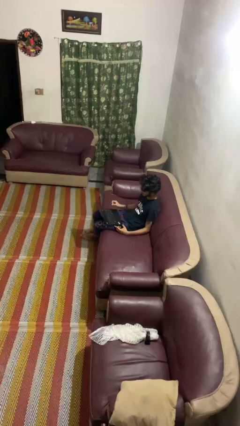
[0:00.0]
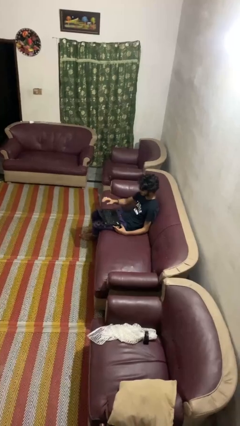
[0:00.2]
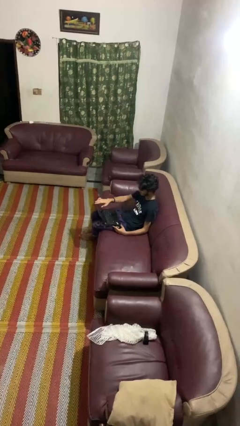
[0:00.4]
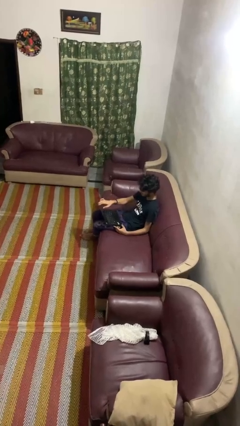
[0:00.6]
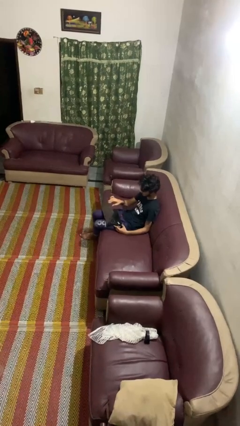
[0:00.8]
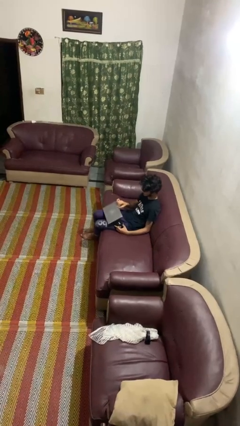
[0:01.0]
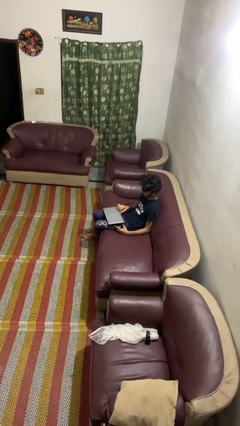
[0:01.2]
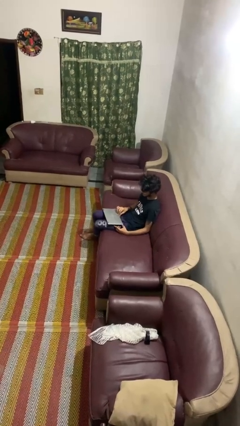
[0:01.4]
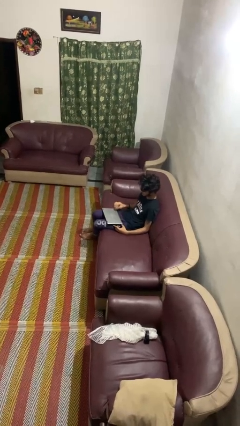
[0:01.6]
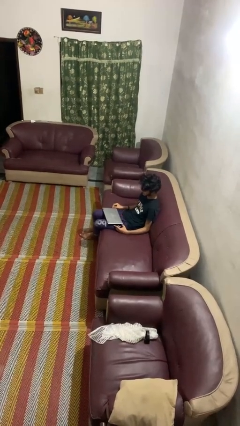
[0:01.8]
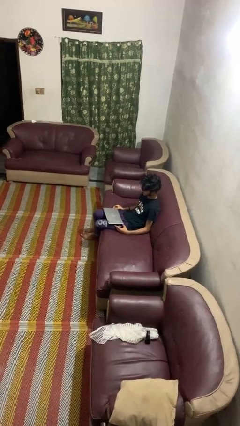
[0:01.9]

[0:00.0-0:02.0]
person closes laptop

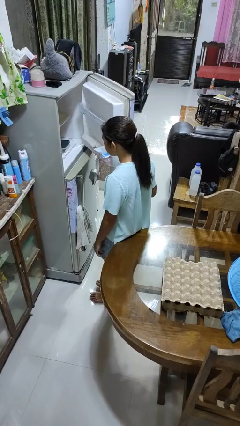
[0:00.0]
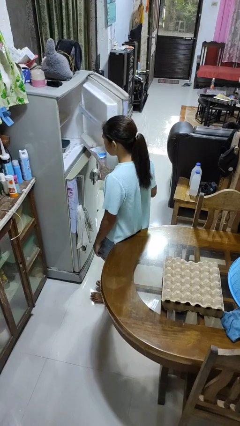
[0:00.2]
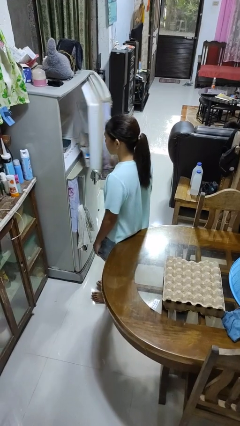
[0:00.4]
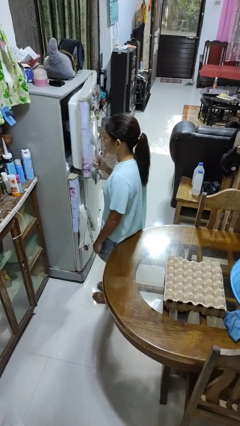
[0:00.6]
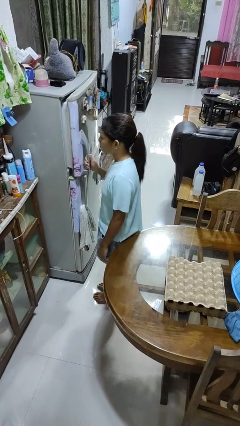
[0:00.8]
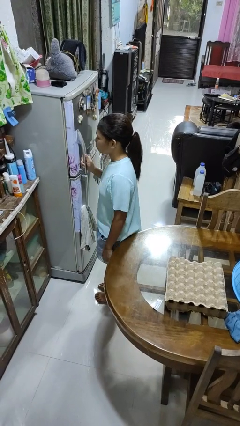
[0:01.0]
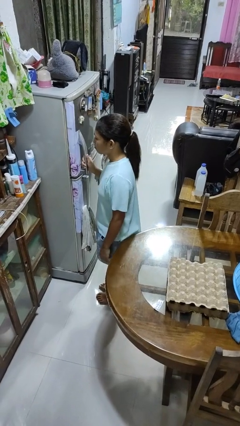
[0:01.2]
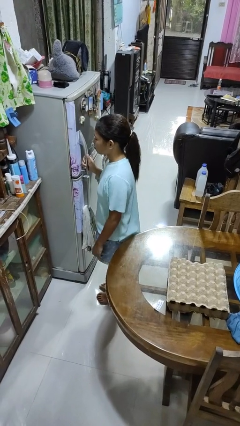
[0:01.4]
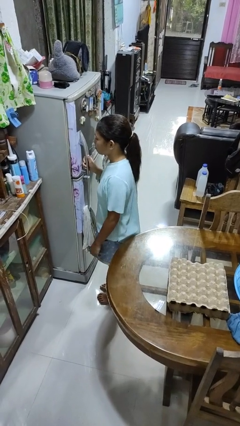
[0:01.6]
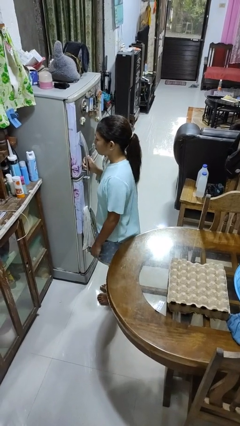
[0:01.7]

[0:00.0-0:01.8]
person closes refrigerator

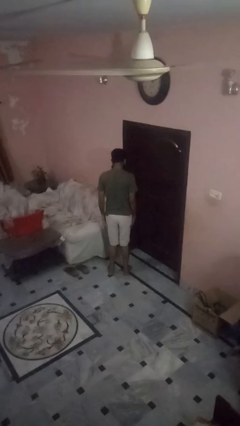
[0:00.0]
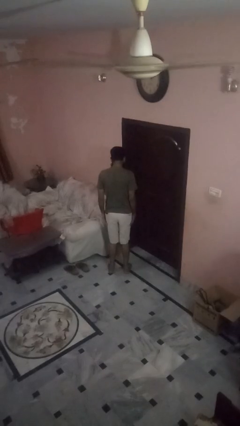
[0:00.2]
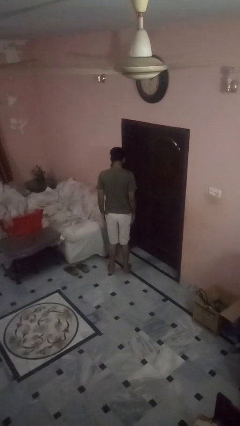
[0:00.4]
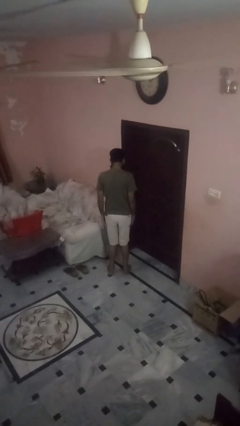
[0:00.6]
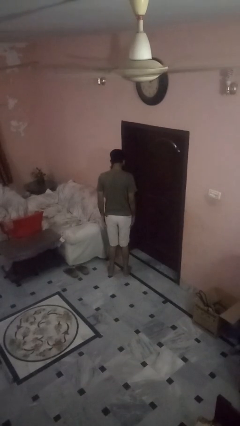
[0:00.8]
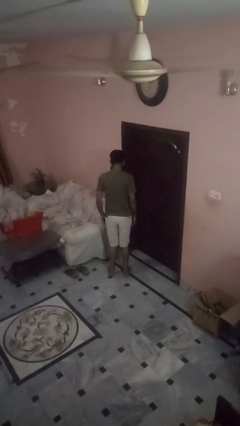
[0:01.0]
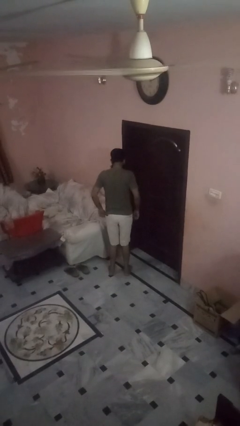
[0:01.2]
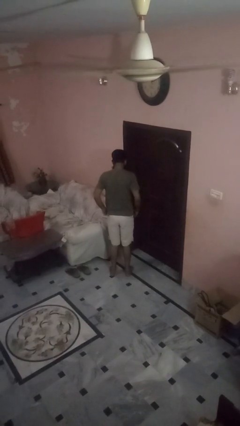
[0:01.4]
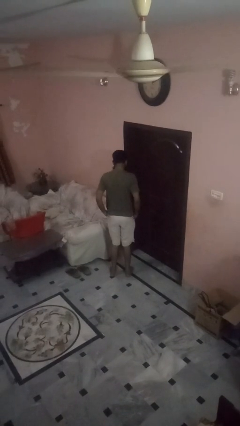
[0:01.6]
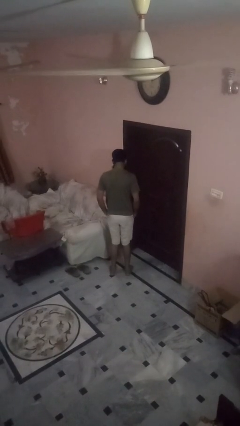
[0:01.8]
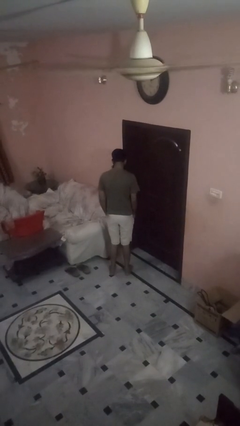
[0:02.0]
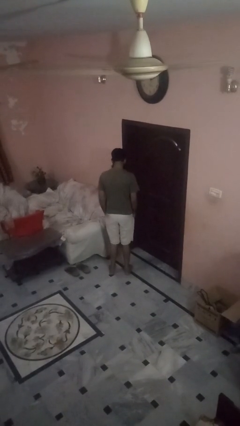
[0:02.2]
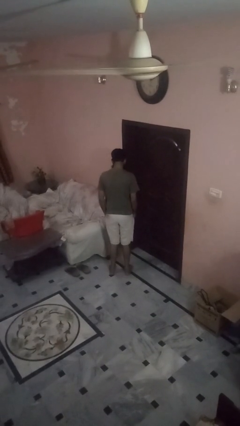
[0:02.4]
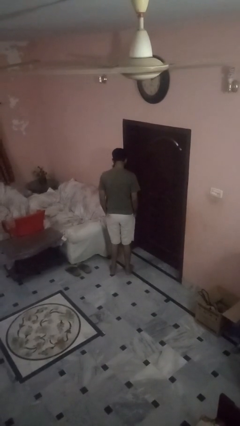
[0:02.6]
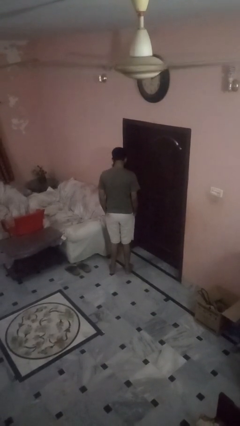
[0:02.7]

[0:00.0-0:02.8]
person puts hands in back pockets

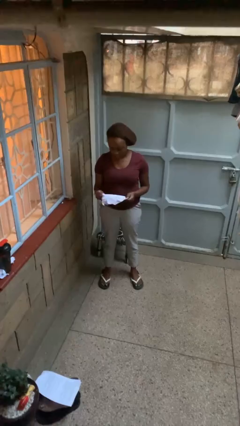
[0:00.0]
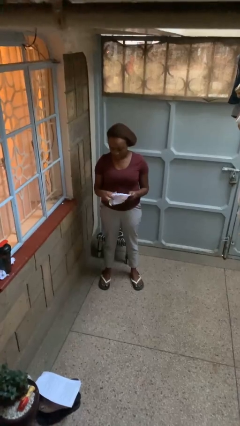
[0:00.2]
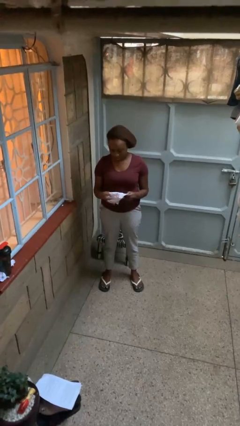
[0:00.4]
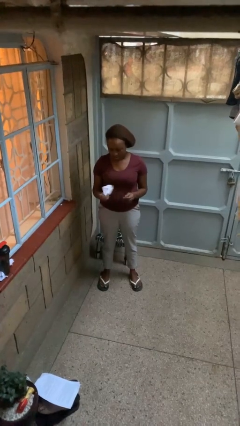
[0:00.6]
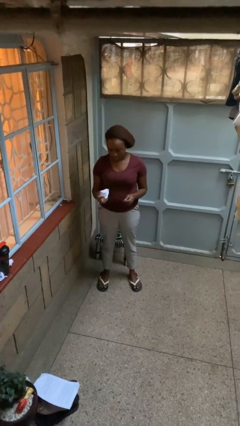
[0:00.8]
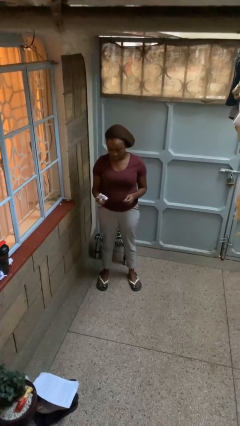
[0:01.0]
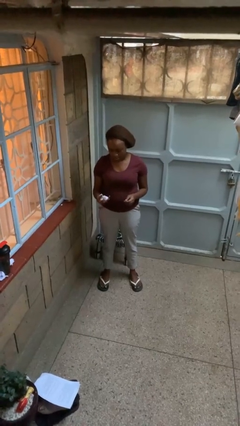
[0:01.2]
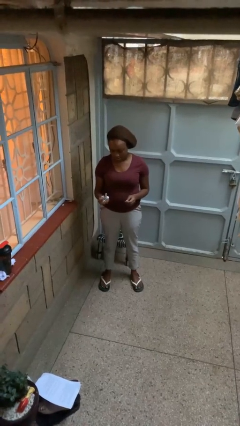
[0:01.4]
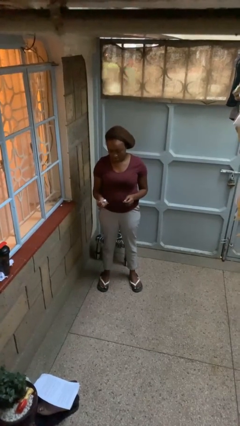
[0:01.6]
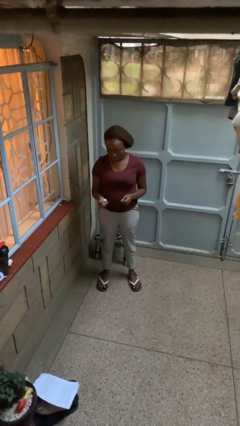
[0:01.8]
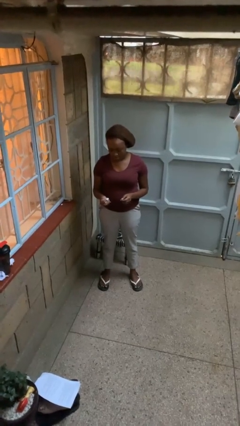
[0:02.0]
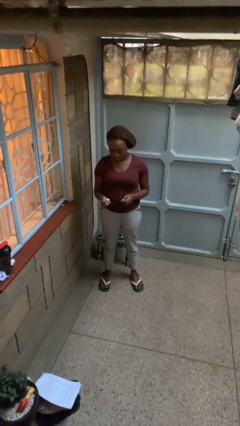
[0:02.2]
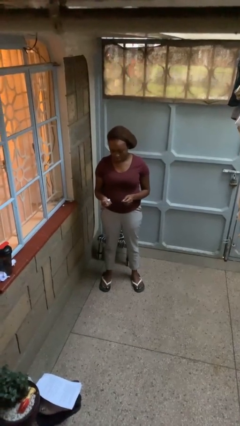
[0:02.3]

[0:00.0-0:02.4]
person crumples paper

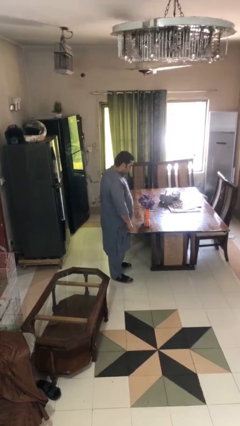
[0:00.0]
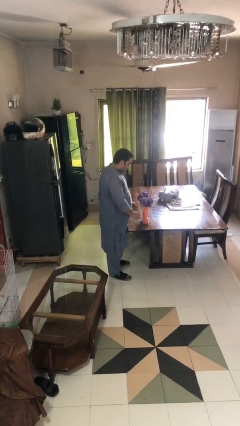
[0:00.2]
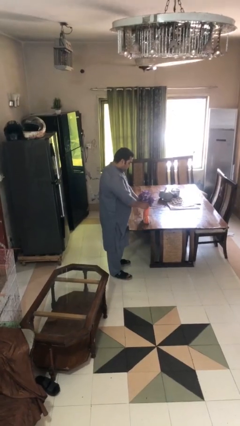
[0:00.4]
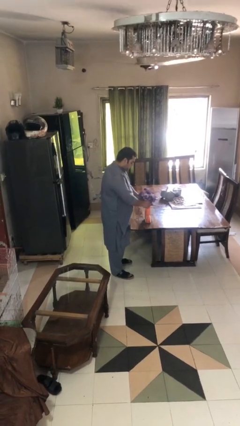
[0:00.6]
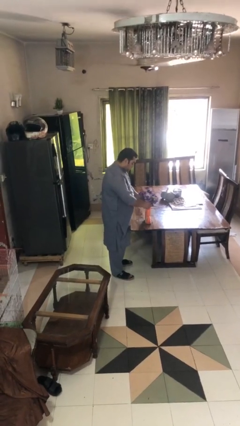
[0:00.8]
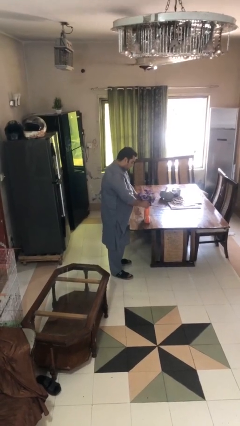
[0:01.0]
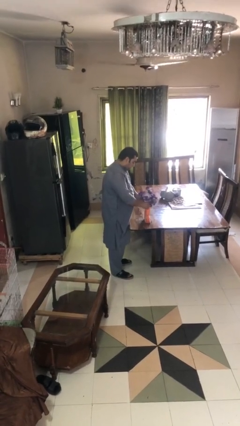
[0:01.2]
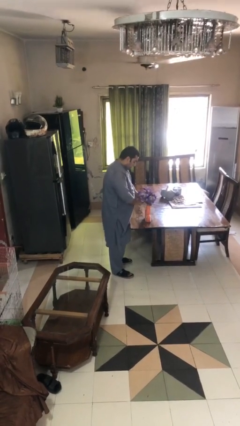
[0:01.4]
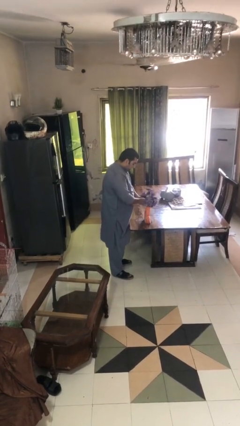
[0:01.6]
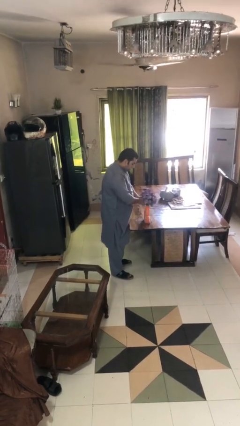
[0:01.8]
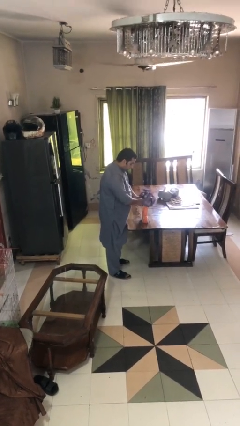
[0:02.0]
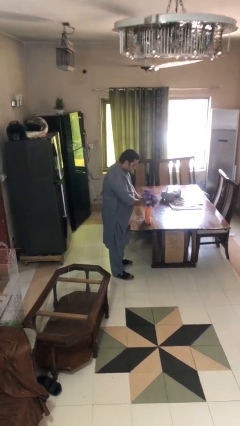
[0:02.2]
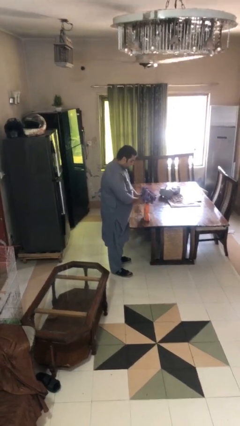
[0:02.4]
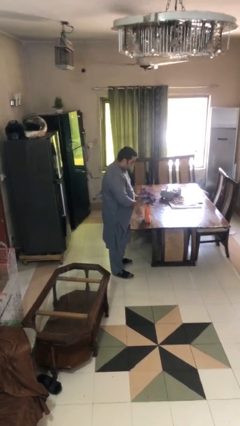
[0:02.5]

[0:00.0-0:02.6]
person arranges flowers in vase

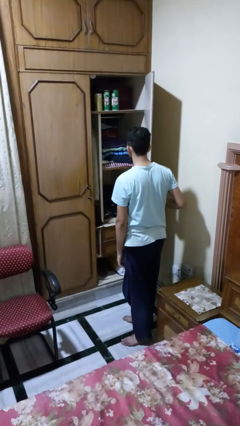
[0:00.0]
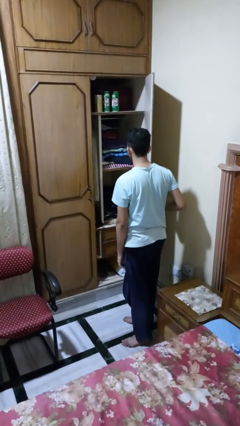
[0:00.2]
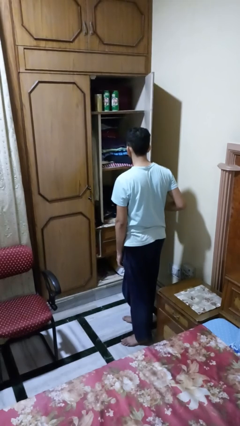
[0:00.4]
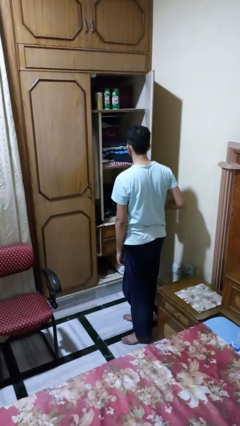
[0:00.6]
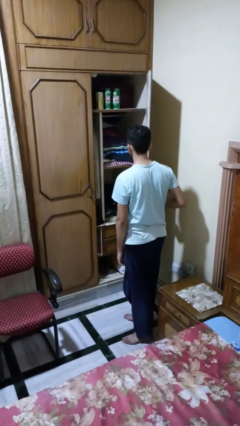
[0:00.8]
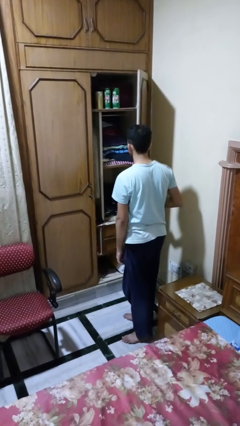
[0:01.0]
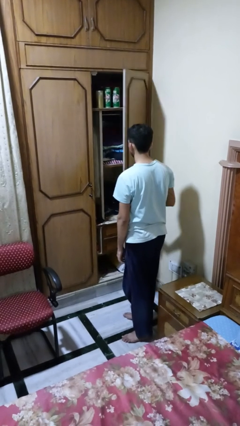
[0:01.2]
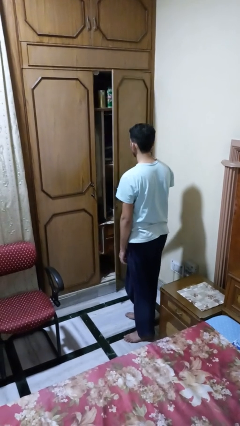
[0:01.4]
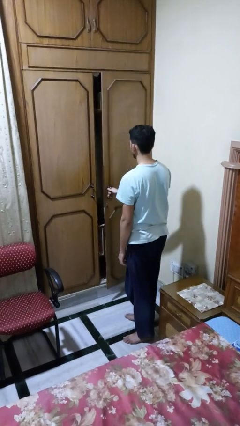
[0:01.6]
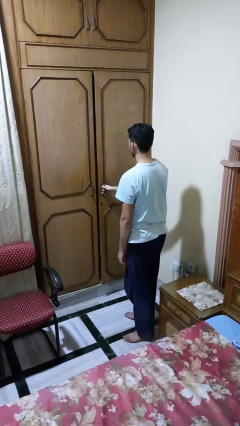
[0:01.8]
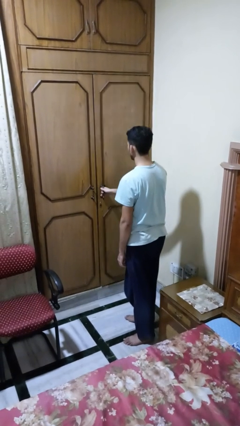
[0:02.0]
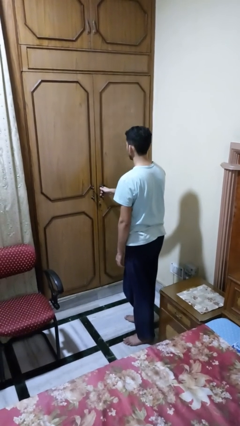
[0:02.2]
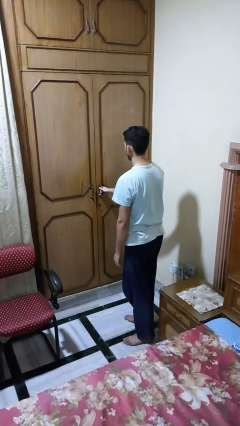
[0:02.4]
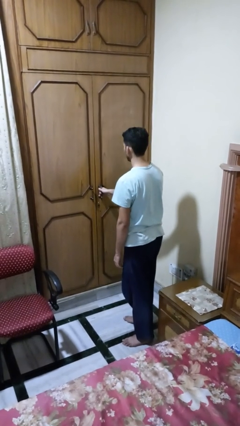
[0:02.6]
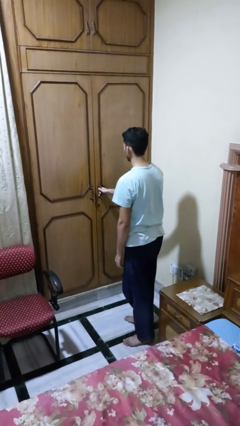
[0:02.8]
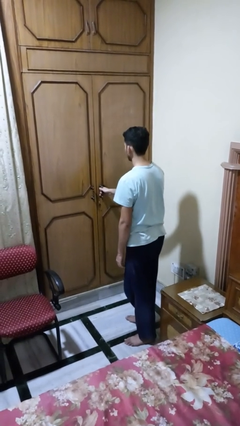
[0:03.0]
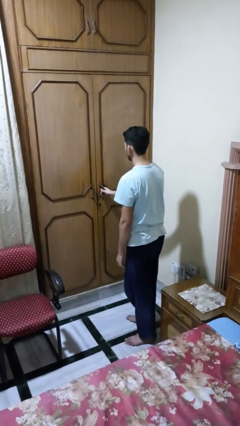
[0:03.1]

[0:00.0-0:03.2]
person closes closet door

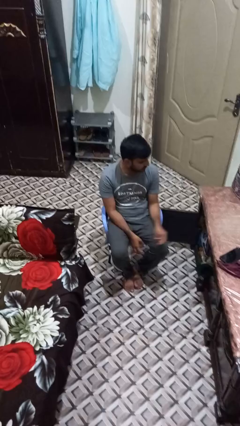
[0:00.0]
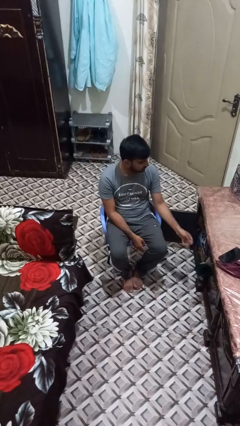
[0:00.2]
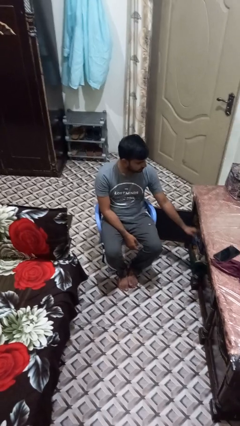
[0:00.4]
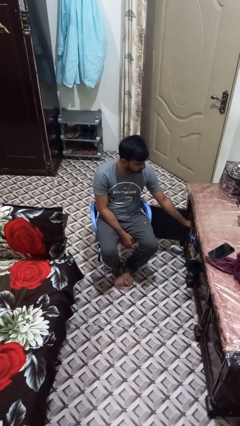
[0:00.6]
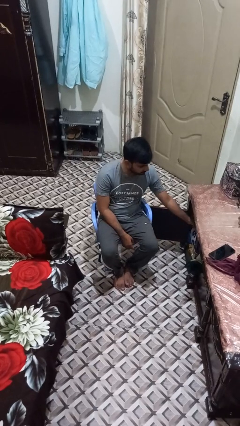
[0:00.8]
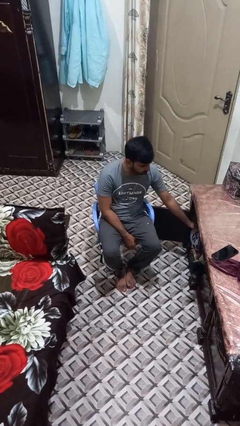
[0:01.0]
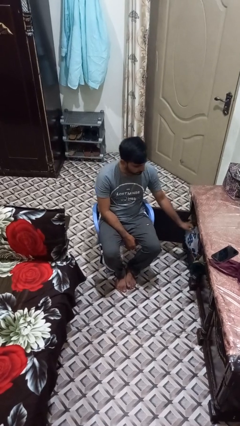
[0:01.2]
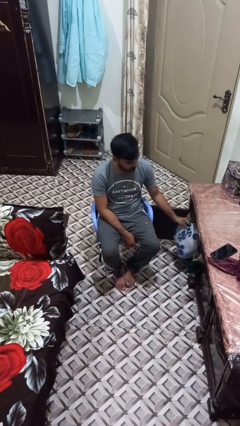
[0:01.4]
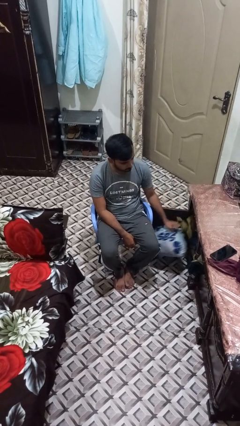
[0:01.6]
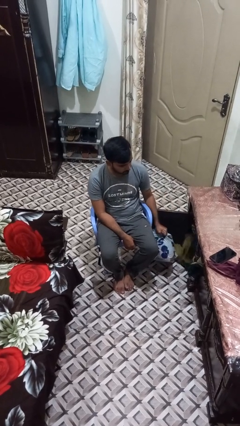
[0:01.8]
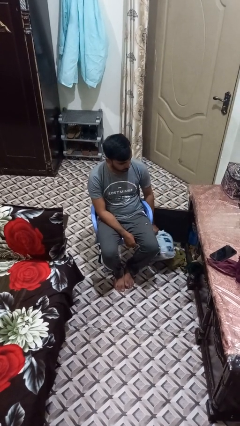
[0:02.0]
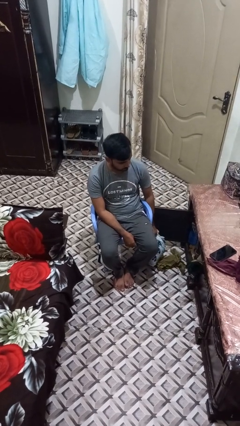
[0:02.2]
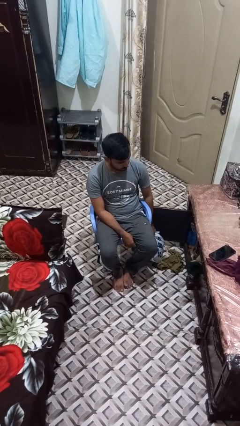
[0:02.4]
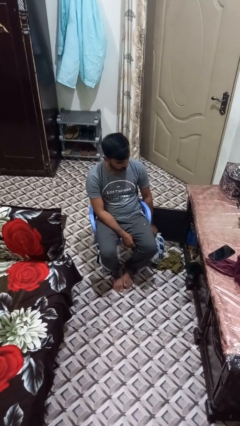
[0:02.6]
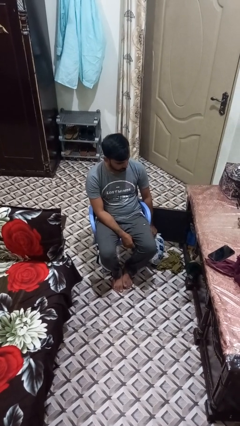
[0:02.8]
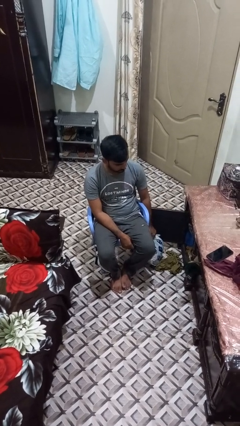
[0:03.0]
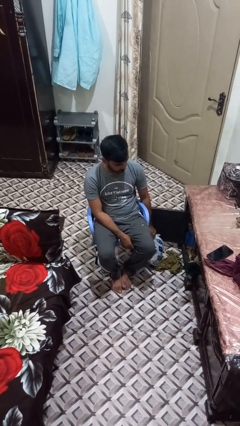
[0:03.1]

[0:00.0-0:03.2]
person picks up object from cabinet
